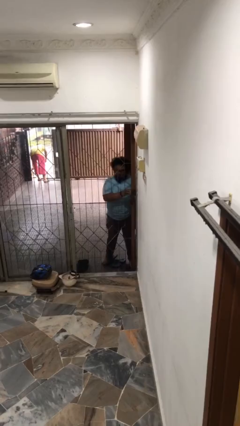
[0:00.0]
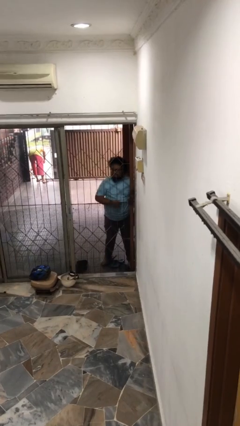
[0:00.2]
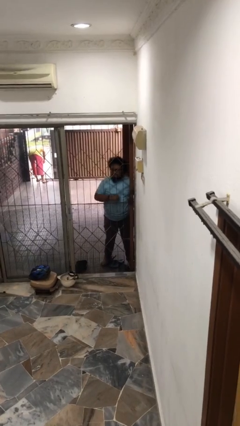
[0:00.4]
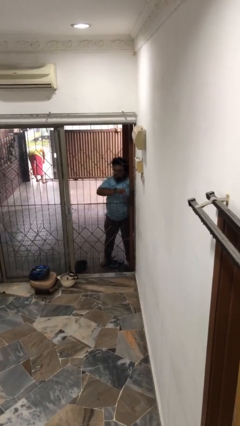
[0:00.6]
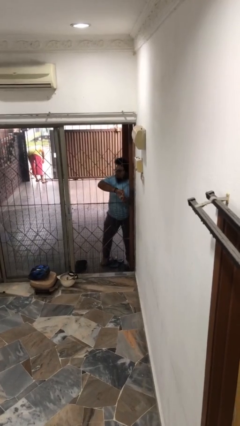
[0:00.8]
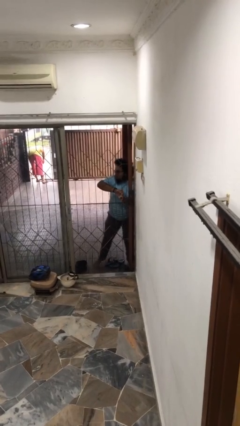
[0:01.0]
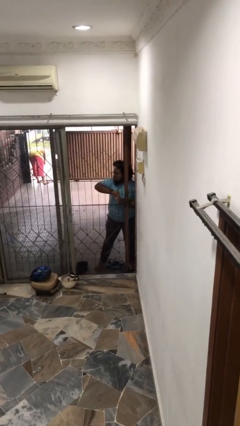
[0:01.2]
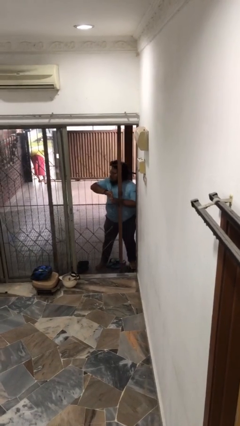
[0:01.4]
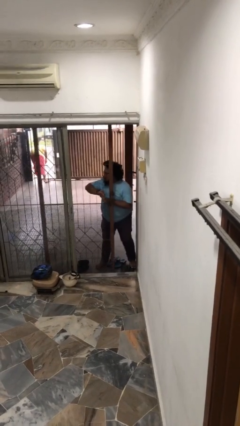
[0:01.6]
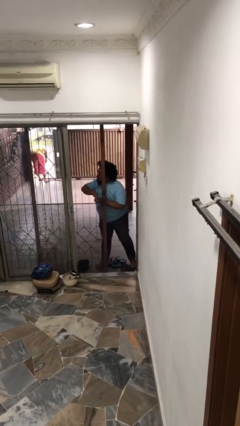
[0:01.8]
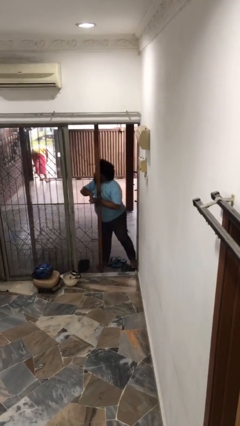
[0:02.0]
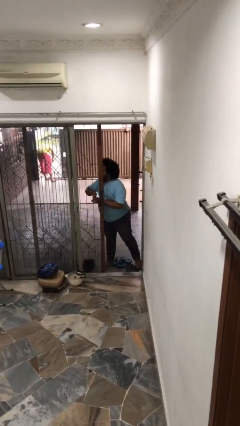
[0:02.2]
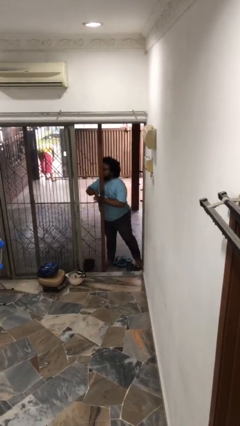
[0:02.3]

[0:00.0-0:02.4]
person opens facility door

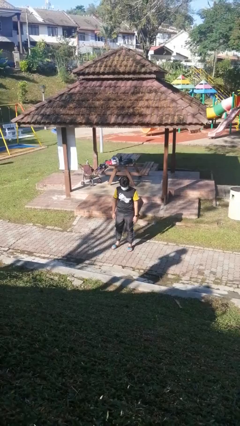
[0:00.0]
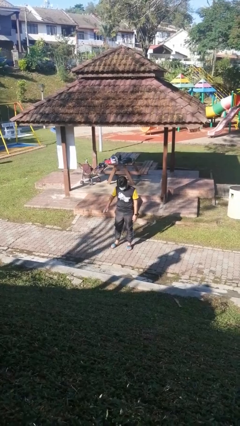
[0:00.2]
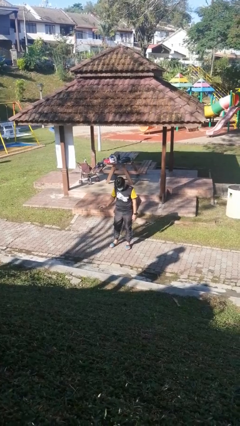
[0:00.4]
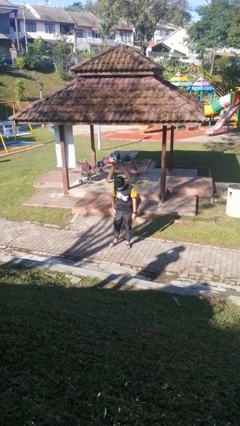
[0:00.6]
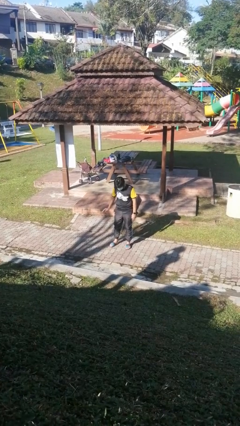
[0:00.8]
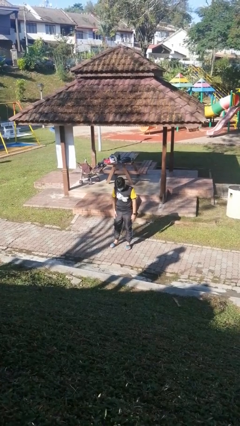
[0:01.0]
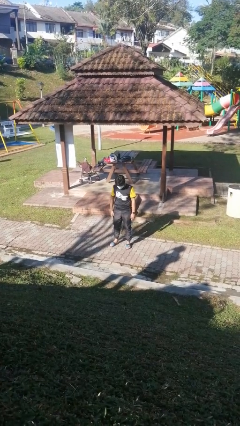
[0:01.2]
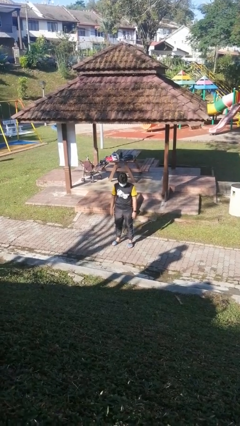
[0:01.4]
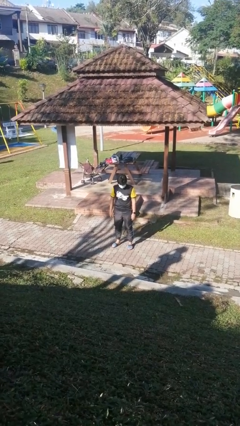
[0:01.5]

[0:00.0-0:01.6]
person slaps hands on thighs

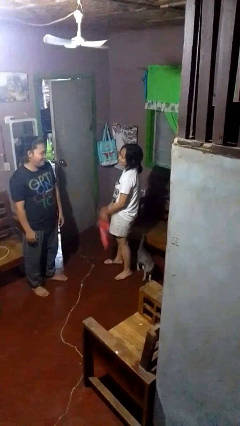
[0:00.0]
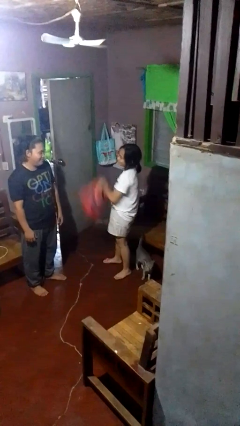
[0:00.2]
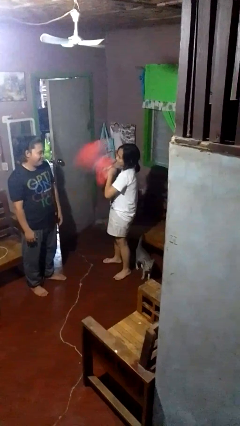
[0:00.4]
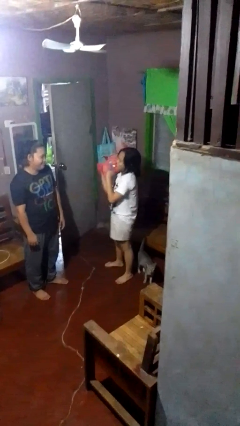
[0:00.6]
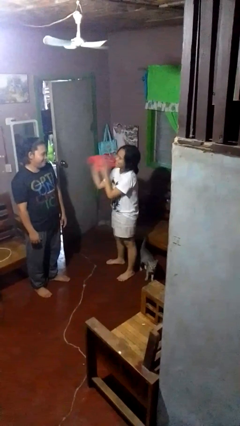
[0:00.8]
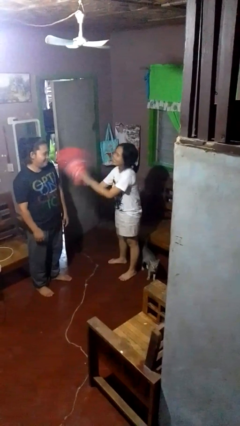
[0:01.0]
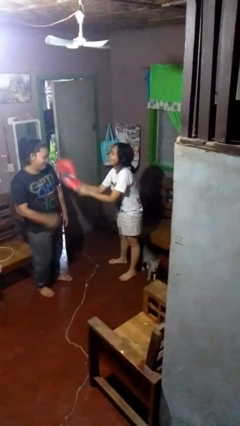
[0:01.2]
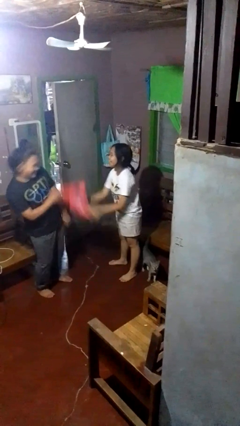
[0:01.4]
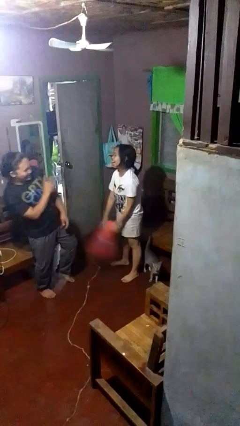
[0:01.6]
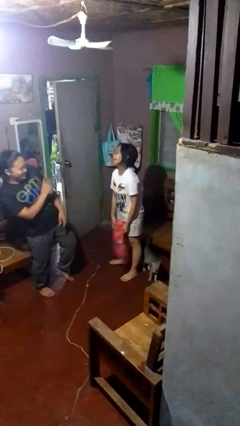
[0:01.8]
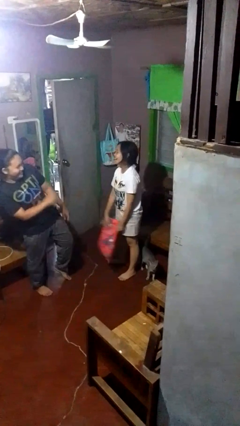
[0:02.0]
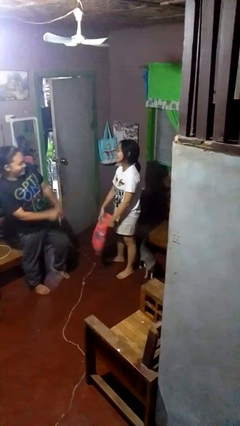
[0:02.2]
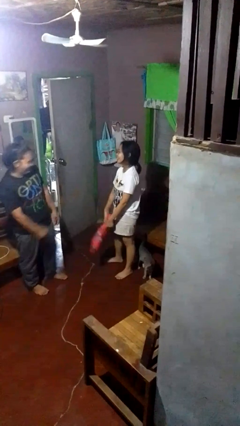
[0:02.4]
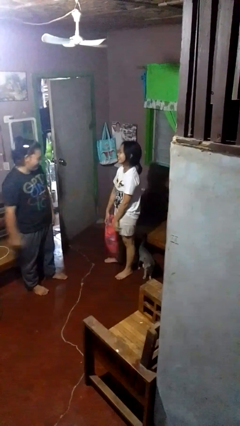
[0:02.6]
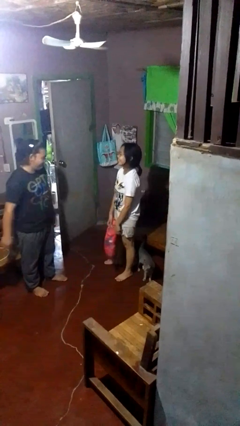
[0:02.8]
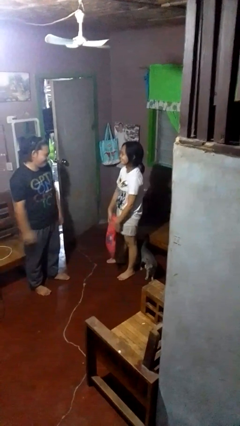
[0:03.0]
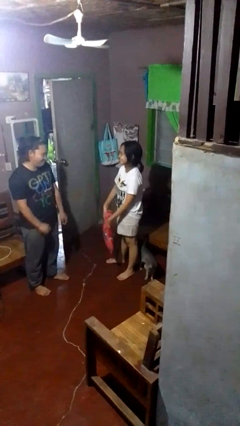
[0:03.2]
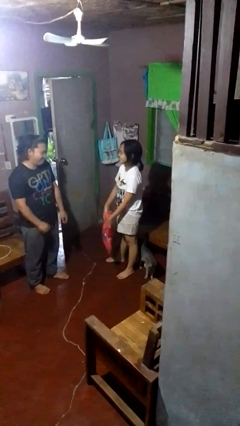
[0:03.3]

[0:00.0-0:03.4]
person hits person with pillow

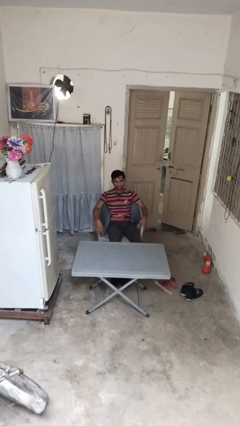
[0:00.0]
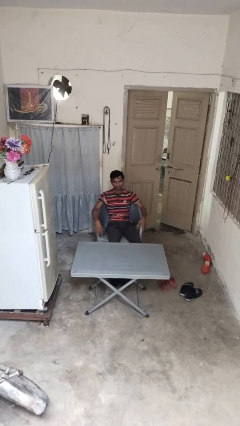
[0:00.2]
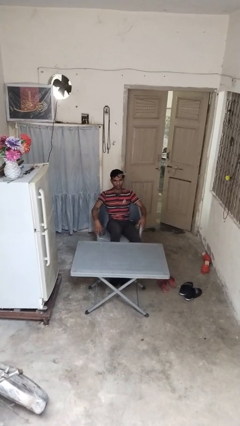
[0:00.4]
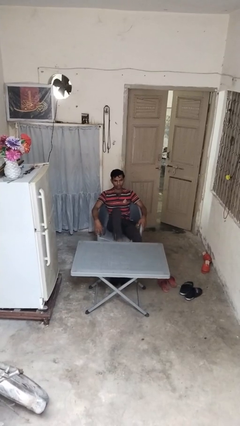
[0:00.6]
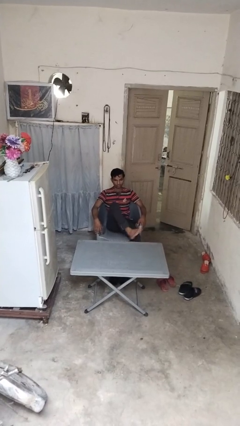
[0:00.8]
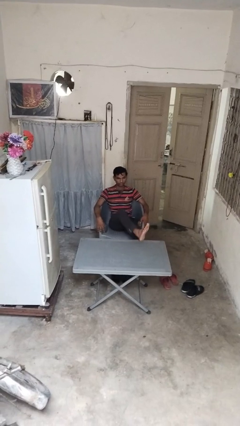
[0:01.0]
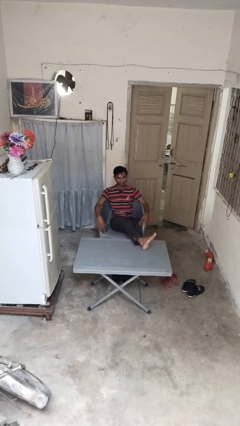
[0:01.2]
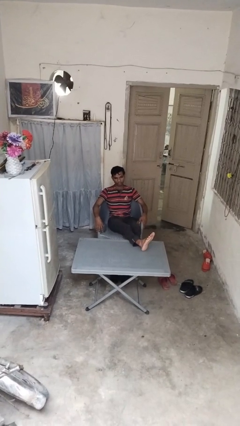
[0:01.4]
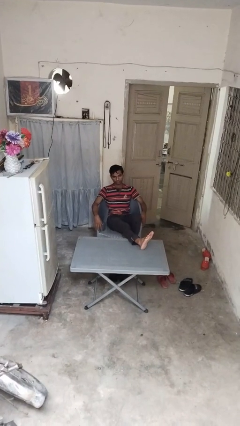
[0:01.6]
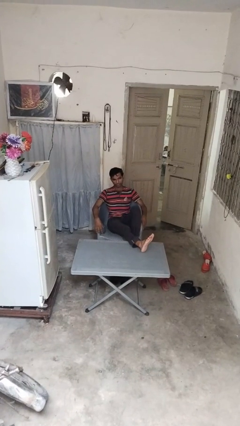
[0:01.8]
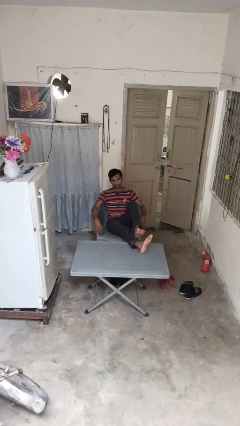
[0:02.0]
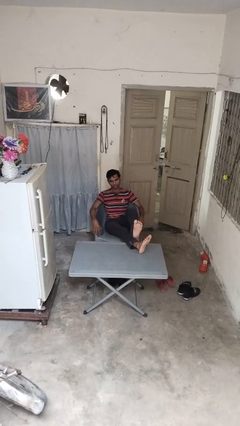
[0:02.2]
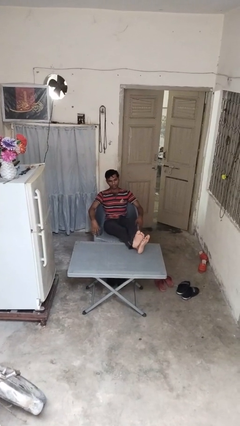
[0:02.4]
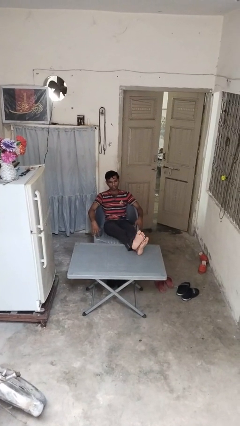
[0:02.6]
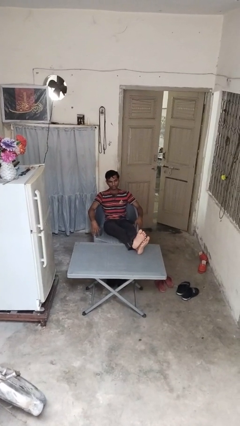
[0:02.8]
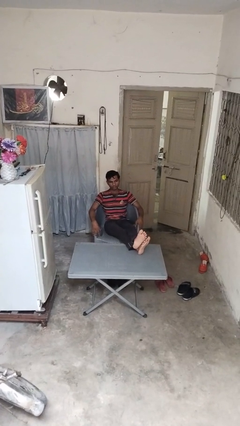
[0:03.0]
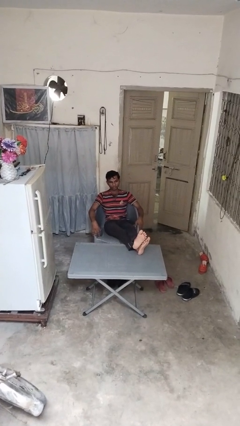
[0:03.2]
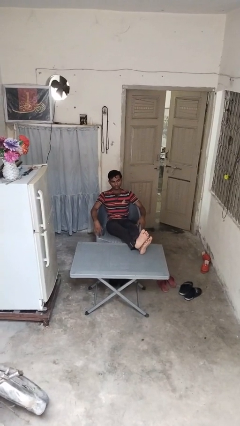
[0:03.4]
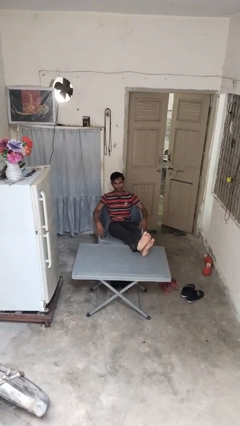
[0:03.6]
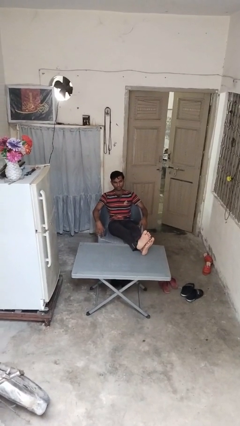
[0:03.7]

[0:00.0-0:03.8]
person puts feet up

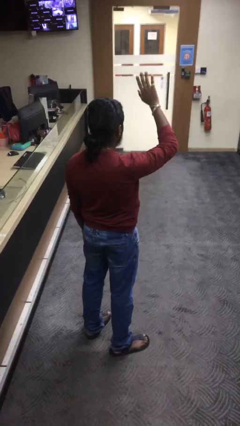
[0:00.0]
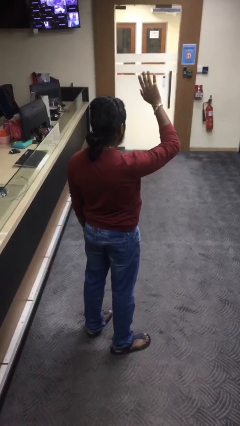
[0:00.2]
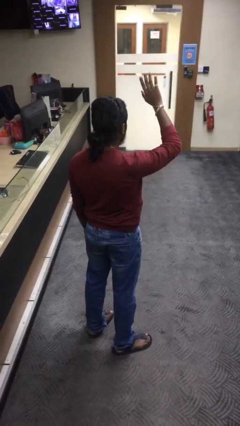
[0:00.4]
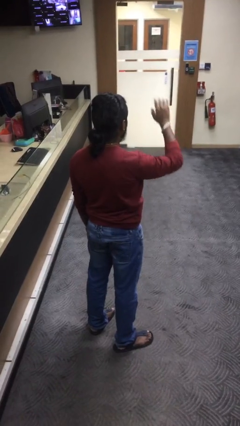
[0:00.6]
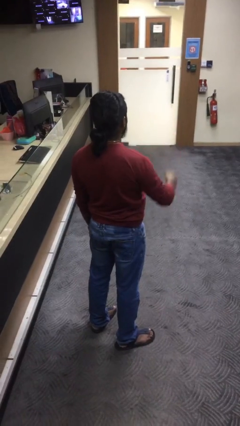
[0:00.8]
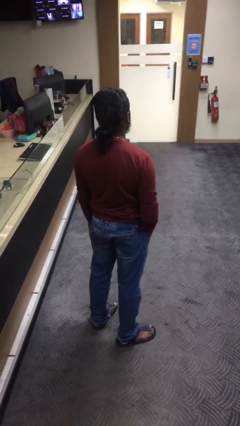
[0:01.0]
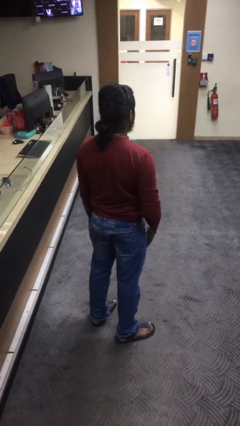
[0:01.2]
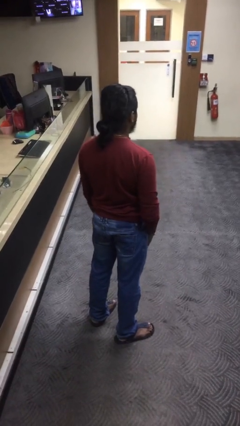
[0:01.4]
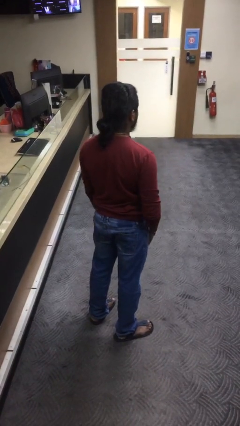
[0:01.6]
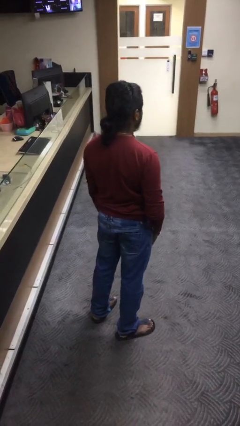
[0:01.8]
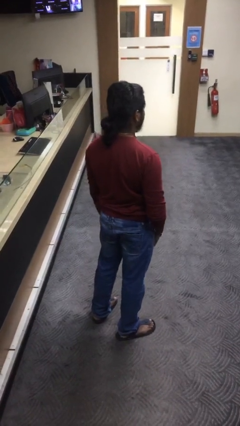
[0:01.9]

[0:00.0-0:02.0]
person gestures lower hand

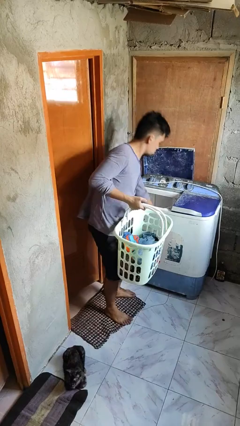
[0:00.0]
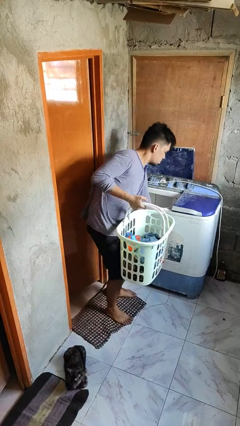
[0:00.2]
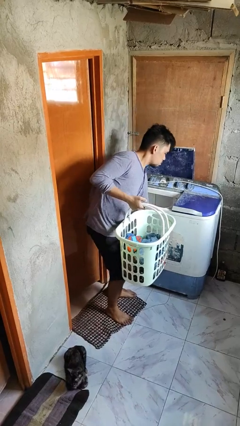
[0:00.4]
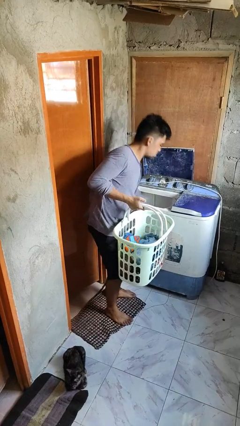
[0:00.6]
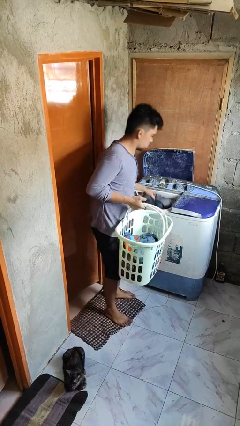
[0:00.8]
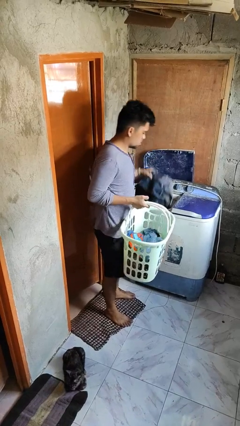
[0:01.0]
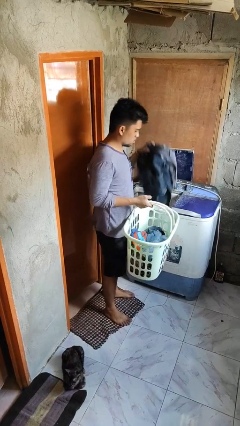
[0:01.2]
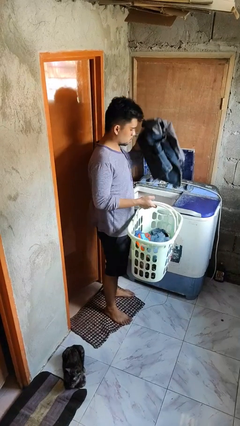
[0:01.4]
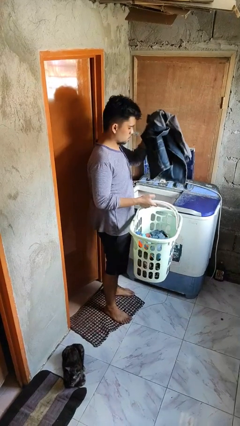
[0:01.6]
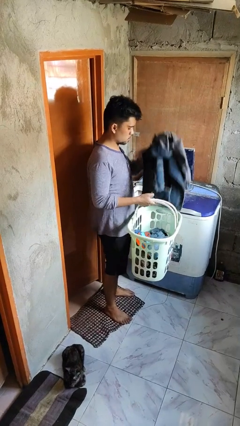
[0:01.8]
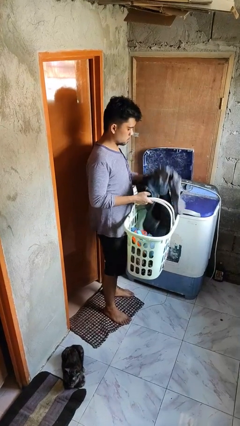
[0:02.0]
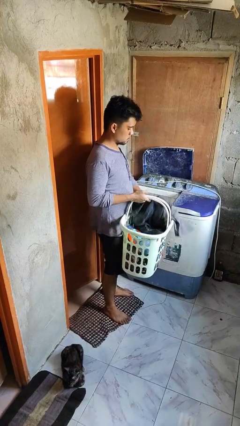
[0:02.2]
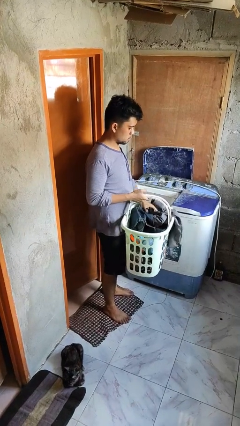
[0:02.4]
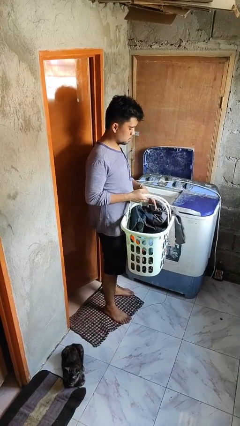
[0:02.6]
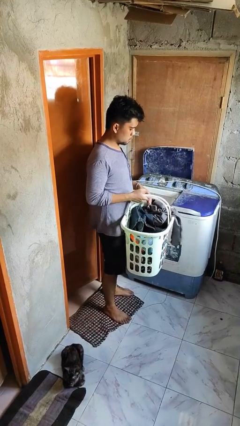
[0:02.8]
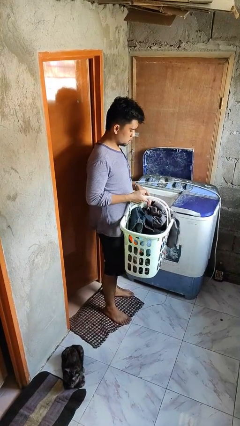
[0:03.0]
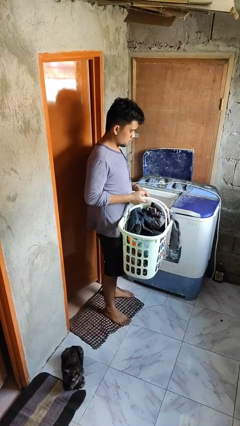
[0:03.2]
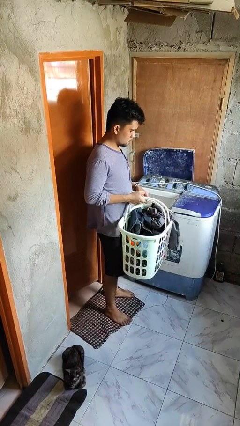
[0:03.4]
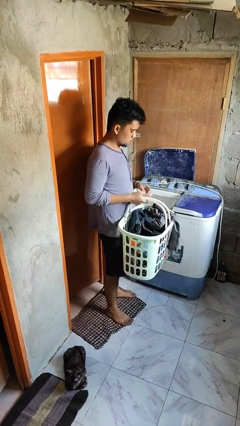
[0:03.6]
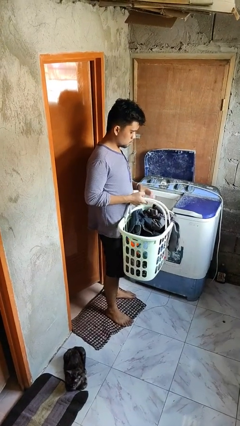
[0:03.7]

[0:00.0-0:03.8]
person unloads clotheswasher

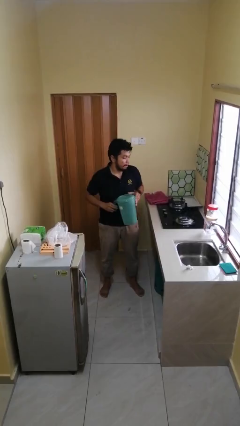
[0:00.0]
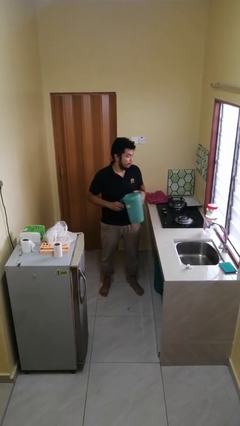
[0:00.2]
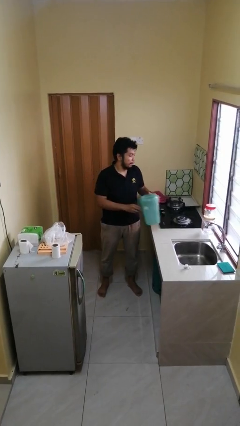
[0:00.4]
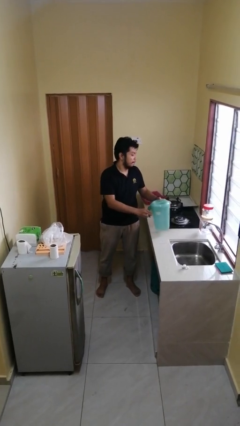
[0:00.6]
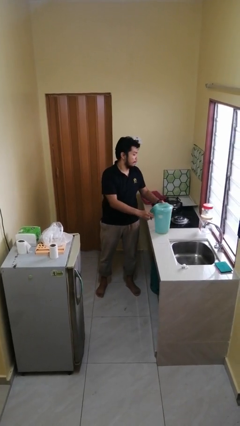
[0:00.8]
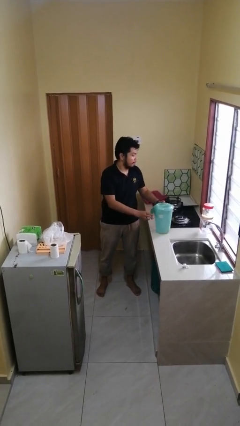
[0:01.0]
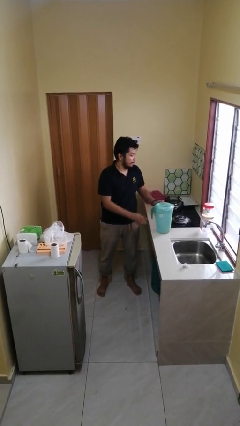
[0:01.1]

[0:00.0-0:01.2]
person puts down object on countertop
